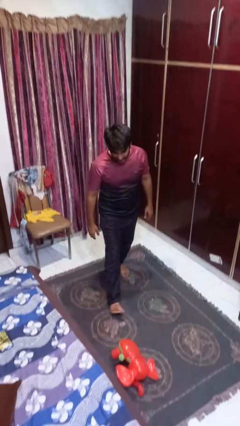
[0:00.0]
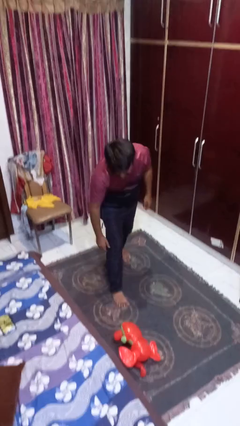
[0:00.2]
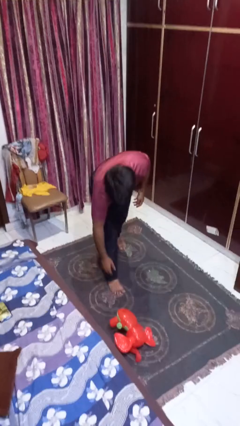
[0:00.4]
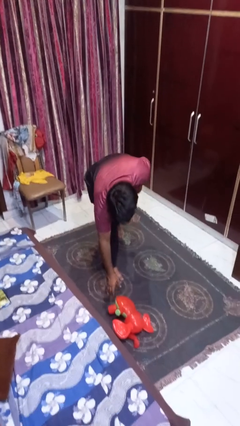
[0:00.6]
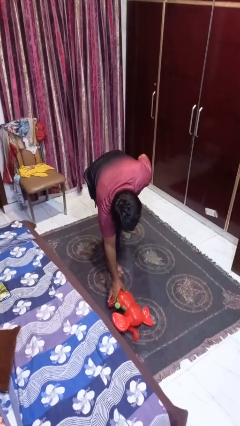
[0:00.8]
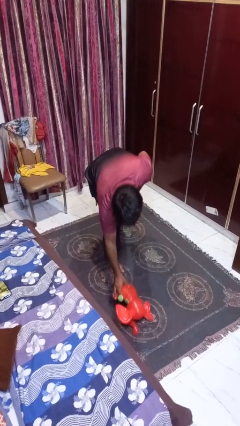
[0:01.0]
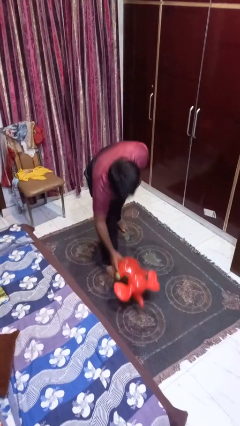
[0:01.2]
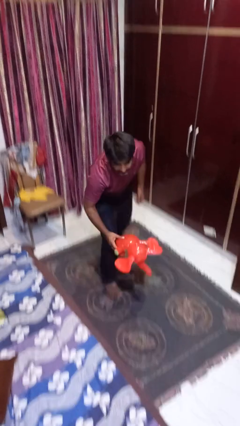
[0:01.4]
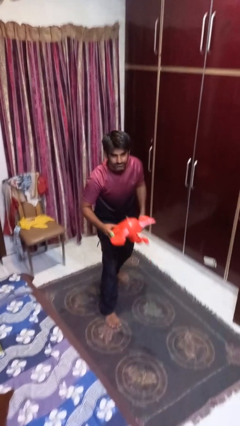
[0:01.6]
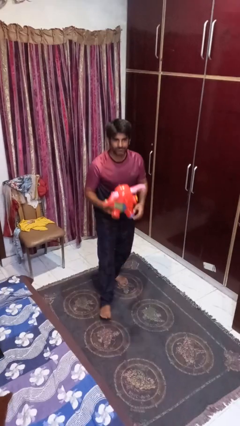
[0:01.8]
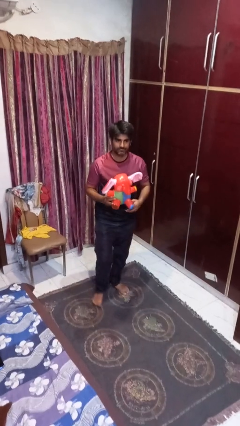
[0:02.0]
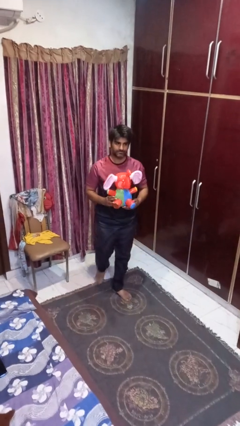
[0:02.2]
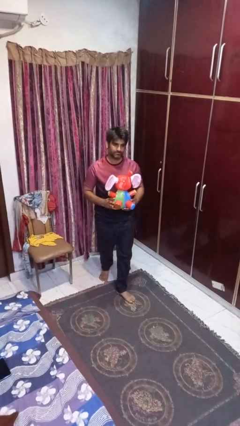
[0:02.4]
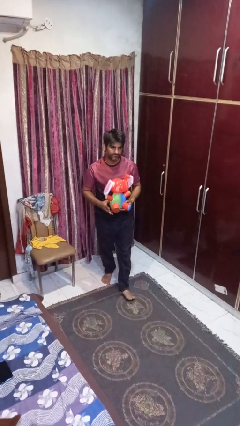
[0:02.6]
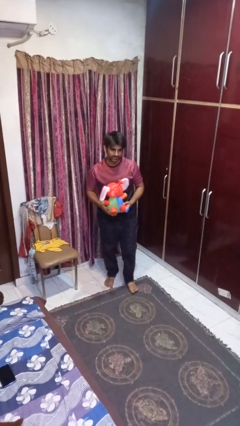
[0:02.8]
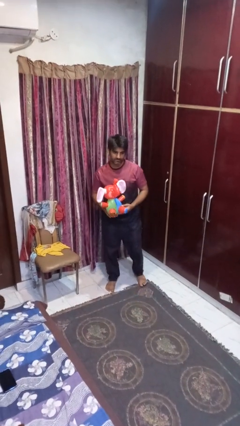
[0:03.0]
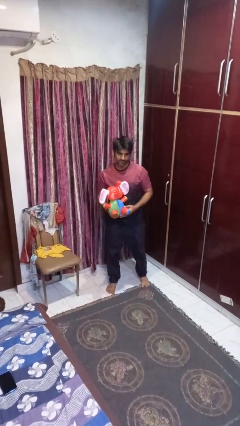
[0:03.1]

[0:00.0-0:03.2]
person picks up object from floor

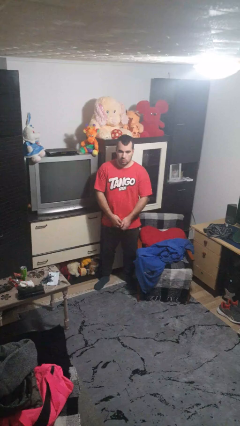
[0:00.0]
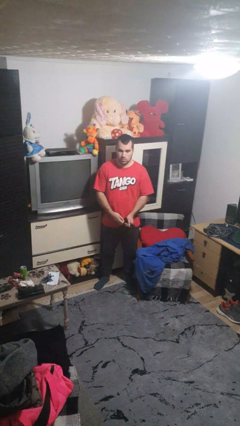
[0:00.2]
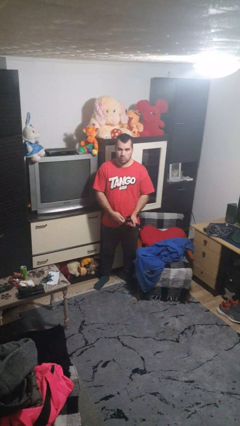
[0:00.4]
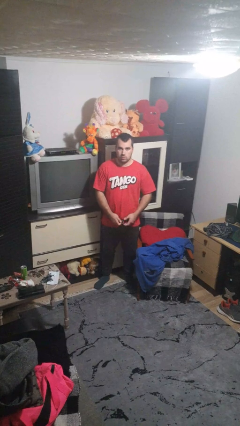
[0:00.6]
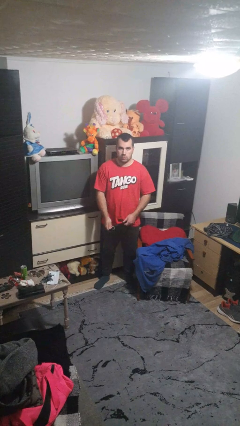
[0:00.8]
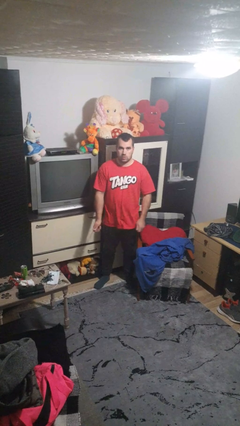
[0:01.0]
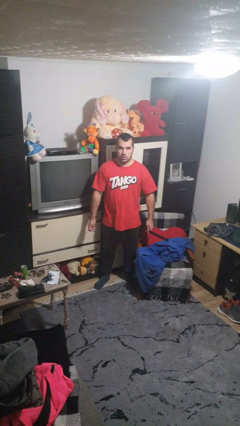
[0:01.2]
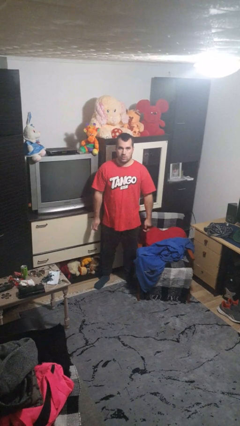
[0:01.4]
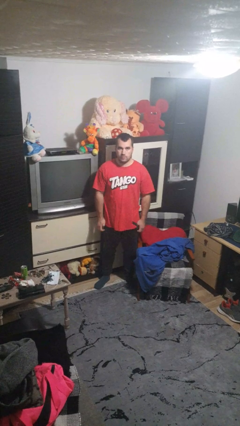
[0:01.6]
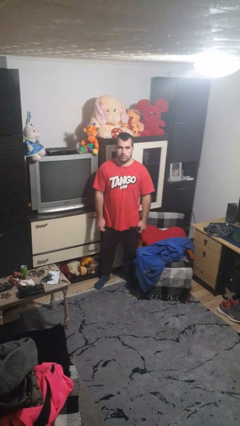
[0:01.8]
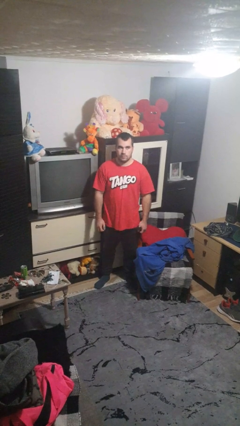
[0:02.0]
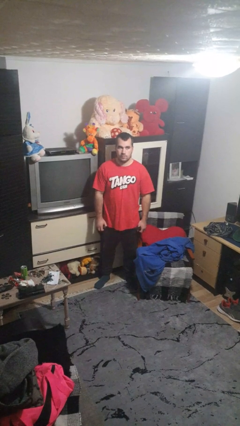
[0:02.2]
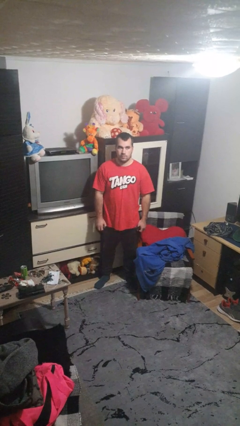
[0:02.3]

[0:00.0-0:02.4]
person takes off belt

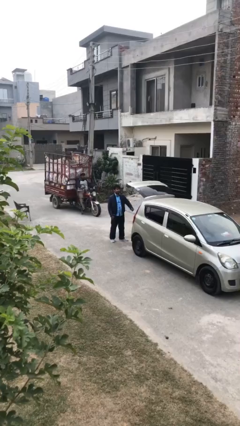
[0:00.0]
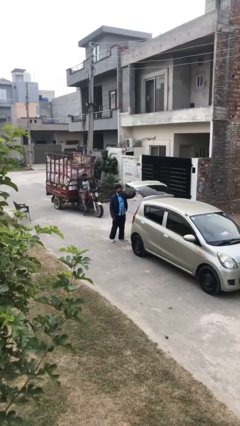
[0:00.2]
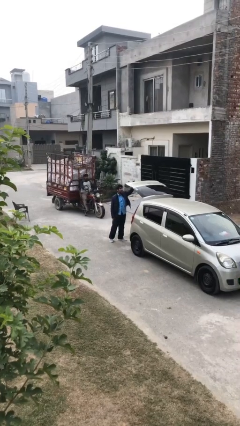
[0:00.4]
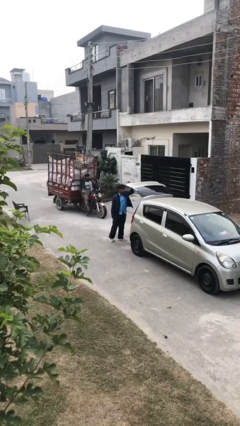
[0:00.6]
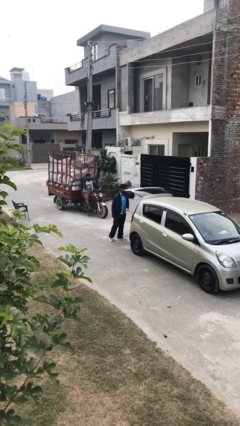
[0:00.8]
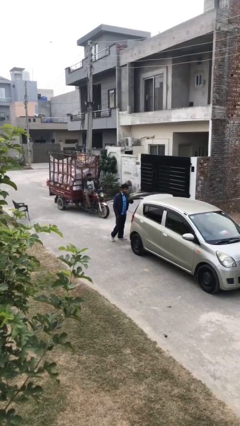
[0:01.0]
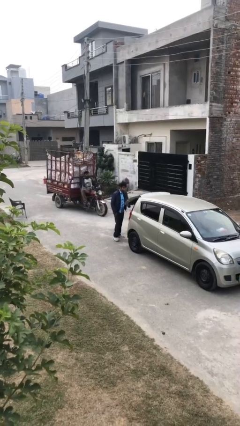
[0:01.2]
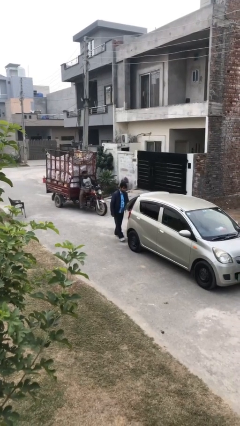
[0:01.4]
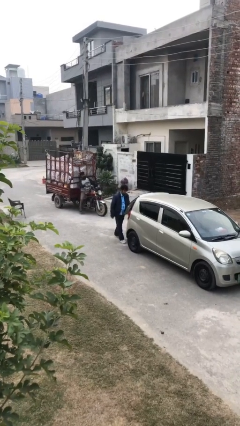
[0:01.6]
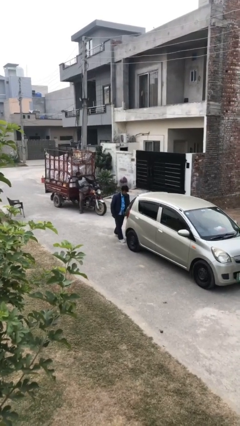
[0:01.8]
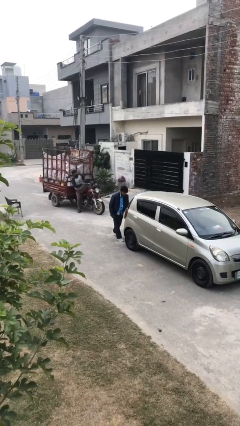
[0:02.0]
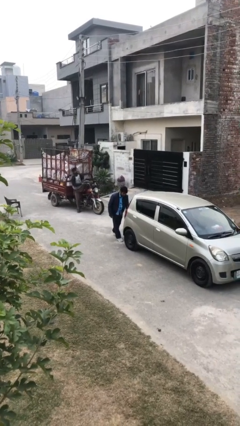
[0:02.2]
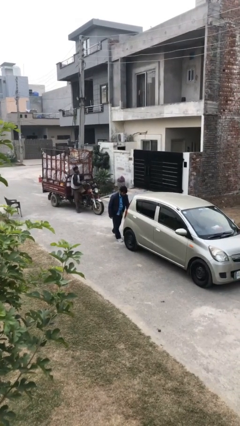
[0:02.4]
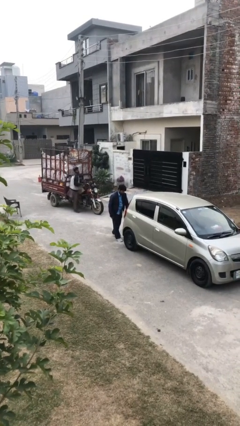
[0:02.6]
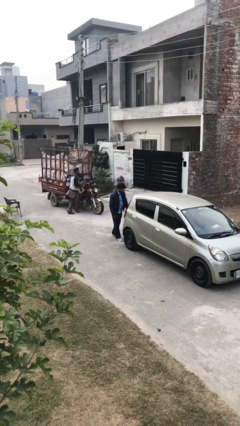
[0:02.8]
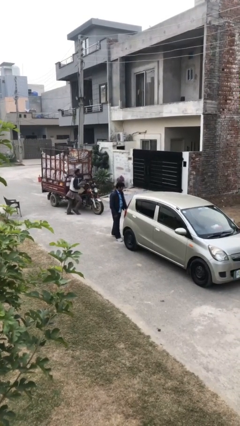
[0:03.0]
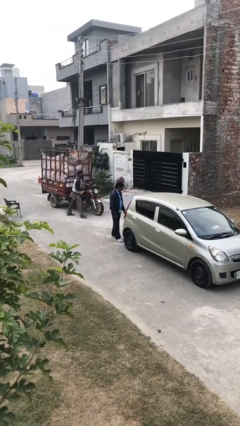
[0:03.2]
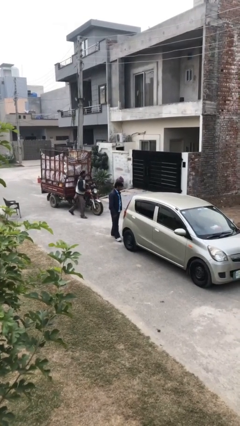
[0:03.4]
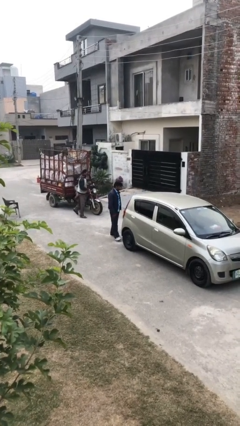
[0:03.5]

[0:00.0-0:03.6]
person closes car trunk

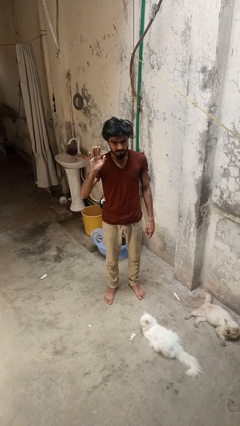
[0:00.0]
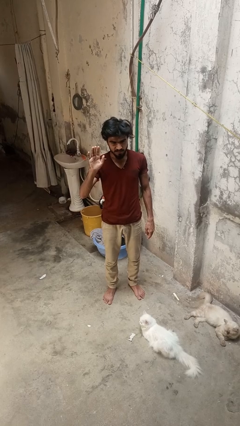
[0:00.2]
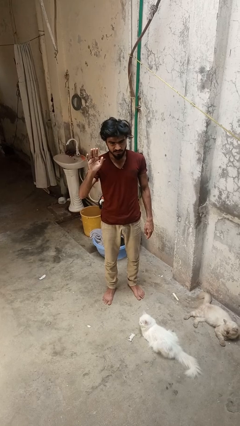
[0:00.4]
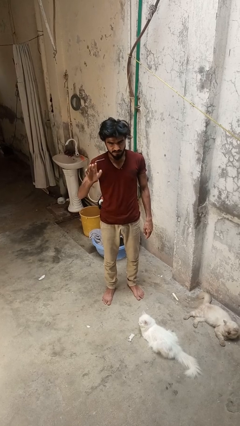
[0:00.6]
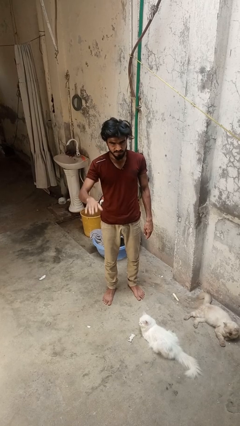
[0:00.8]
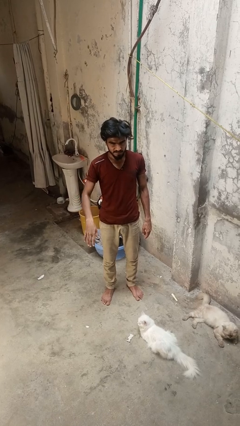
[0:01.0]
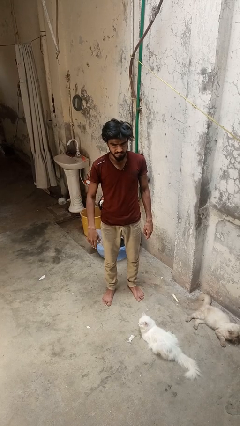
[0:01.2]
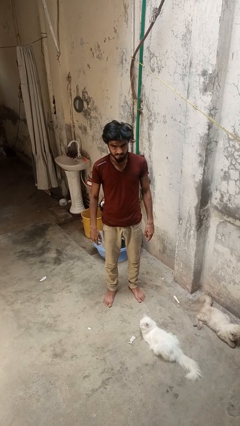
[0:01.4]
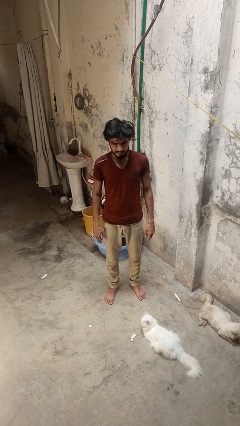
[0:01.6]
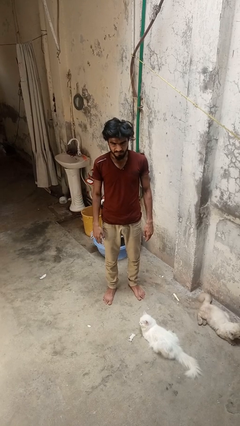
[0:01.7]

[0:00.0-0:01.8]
person gestures lower hand

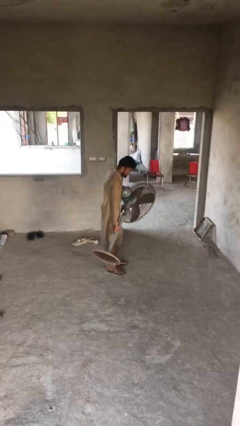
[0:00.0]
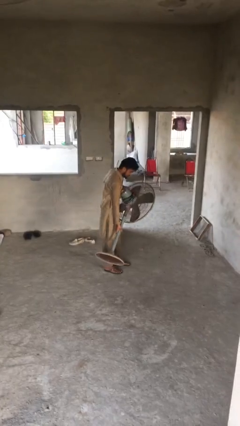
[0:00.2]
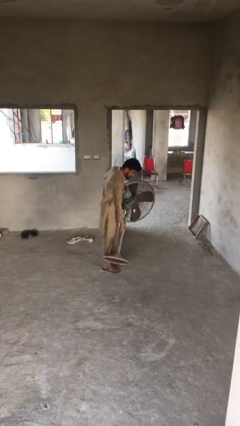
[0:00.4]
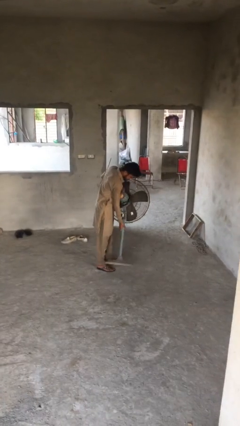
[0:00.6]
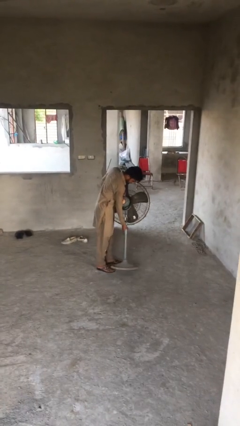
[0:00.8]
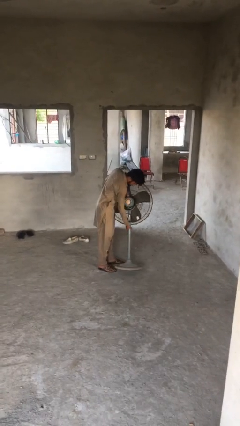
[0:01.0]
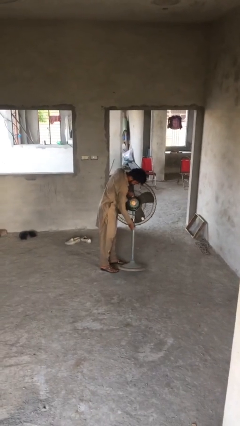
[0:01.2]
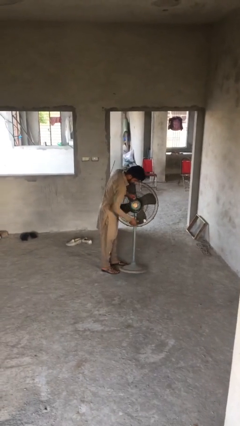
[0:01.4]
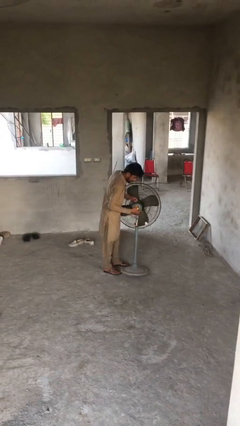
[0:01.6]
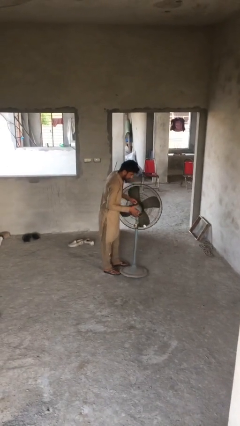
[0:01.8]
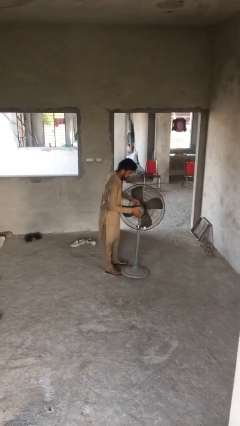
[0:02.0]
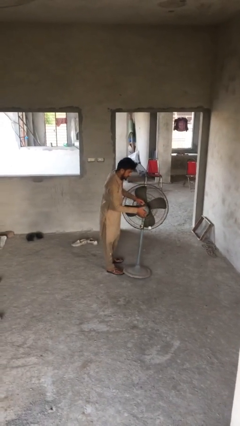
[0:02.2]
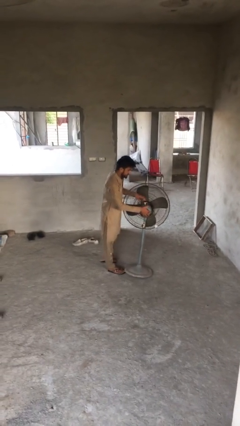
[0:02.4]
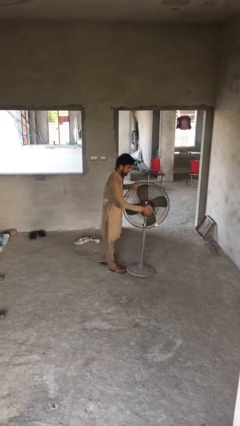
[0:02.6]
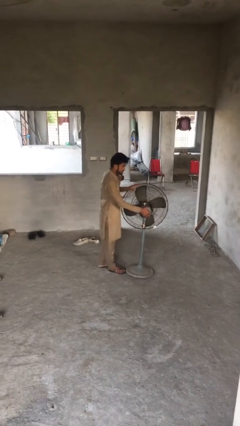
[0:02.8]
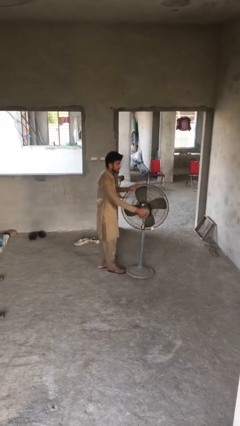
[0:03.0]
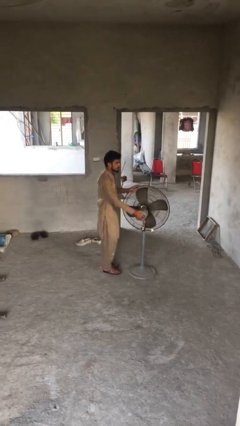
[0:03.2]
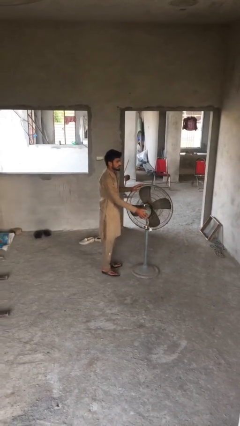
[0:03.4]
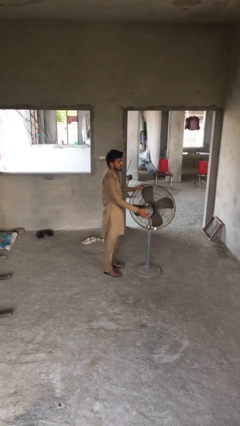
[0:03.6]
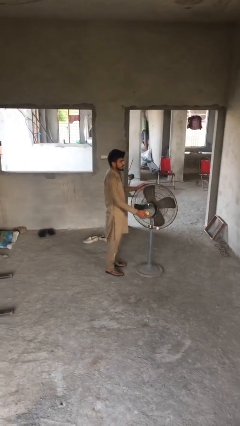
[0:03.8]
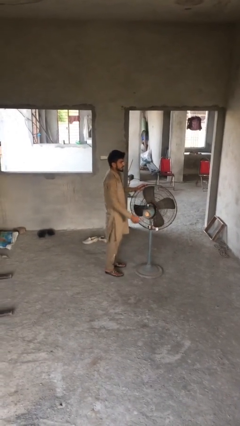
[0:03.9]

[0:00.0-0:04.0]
person puts down object on floor

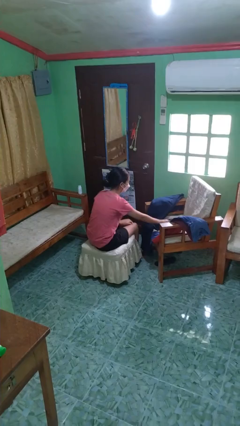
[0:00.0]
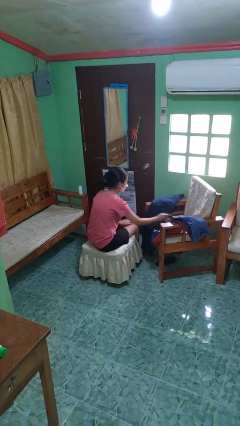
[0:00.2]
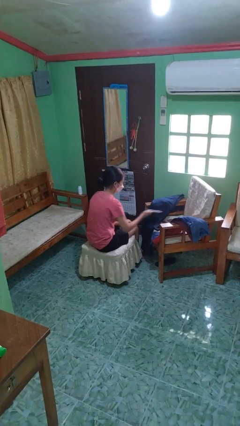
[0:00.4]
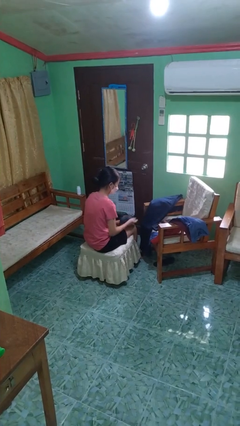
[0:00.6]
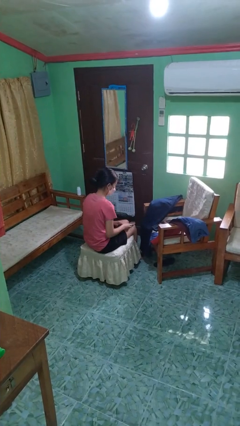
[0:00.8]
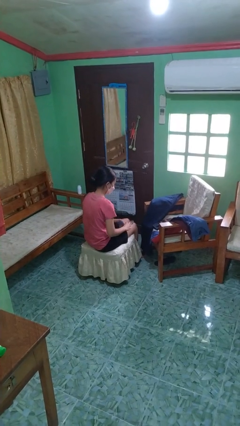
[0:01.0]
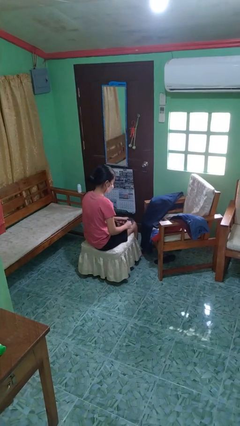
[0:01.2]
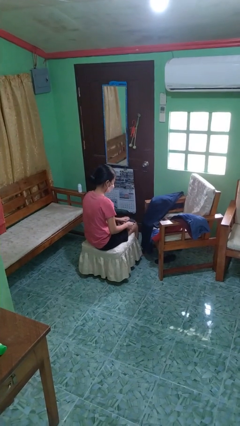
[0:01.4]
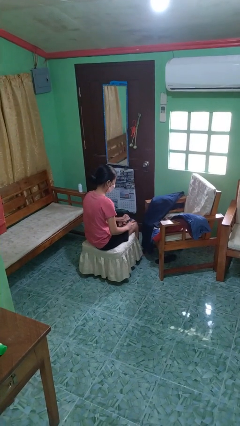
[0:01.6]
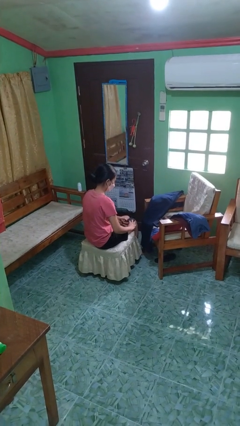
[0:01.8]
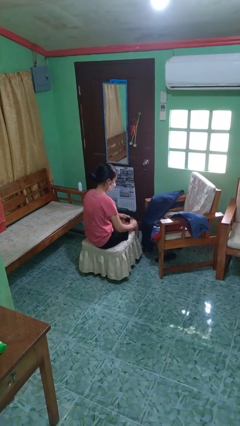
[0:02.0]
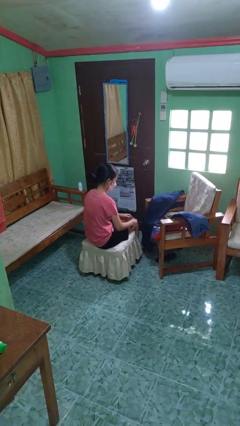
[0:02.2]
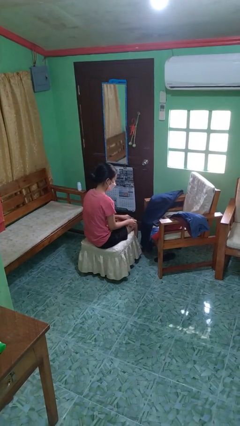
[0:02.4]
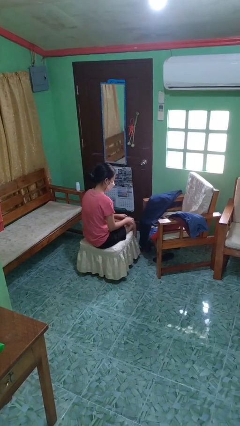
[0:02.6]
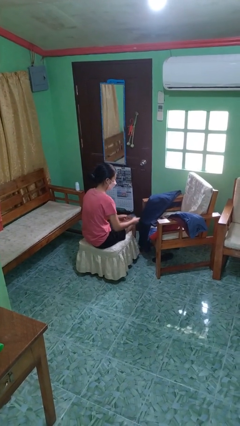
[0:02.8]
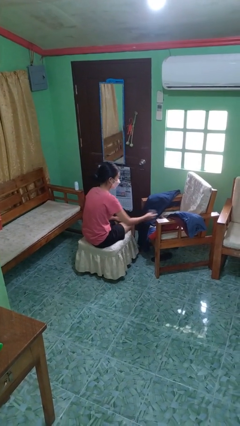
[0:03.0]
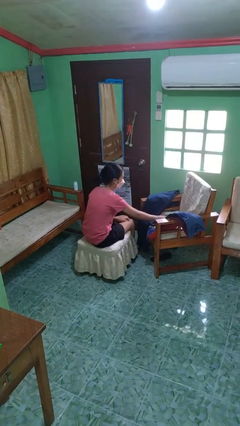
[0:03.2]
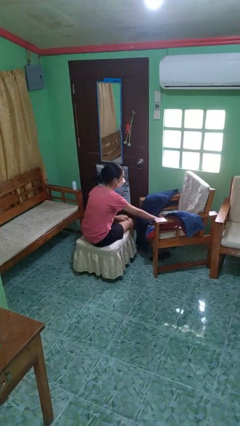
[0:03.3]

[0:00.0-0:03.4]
person folds socks
